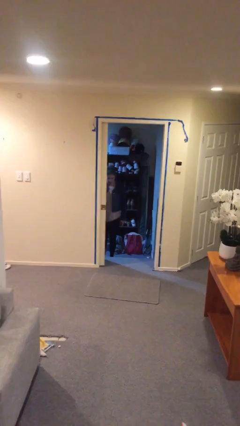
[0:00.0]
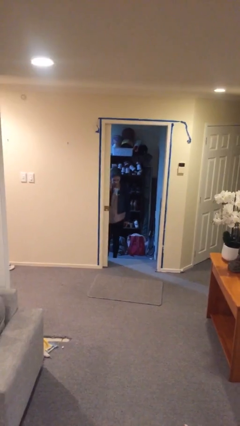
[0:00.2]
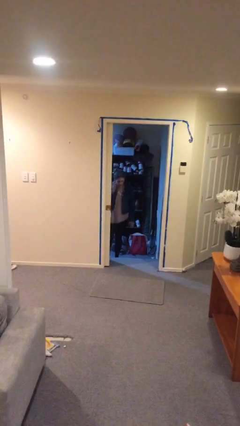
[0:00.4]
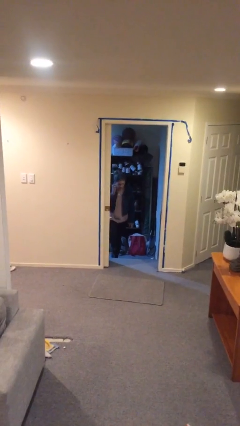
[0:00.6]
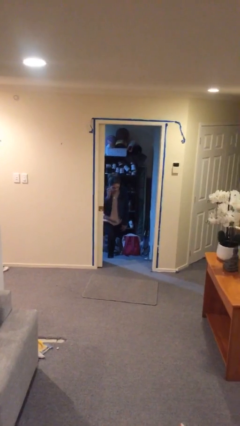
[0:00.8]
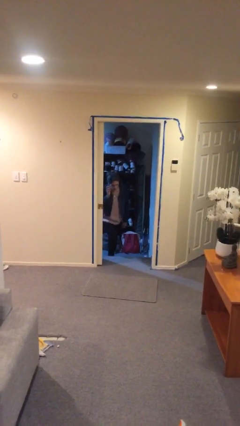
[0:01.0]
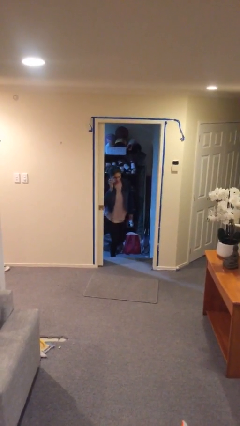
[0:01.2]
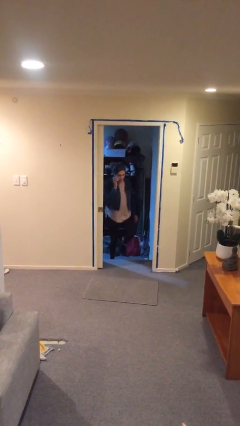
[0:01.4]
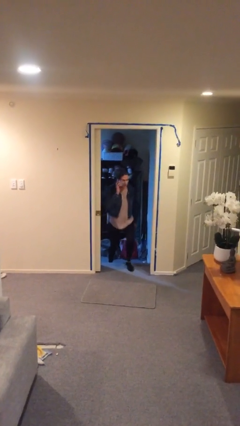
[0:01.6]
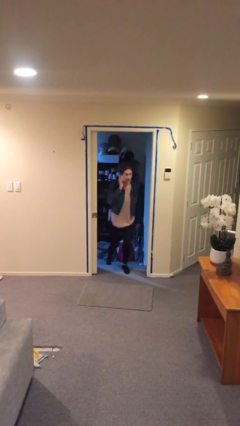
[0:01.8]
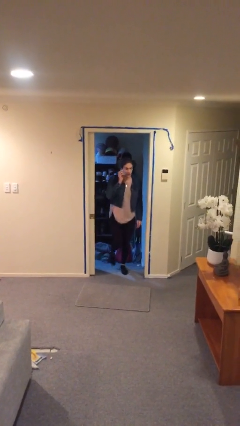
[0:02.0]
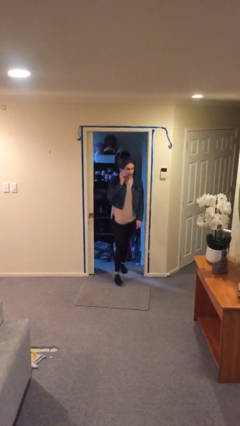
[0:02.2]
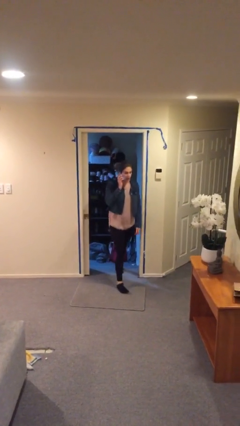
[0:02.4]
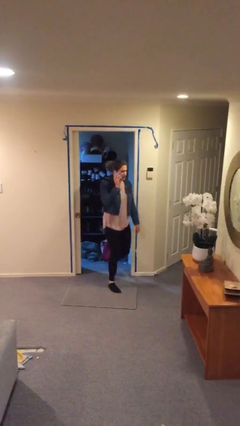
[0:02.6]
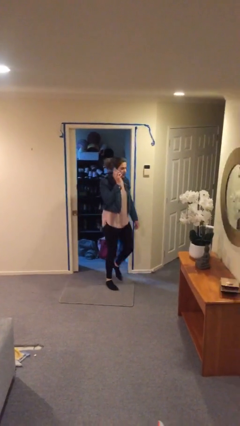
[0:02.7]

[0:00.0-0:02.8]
person enters scene through structure

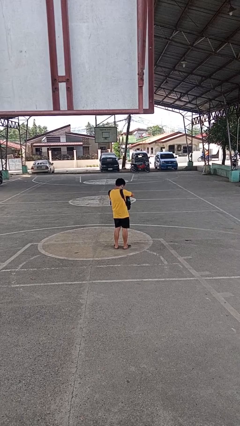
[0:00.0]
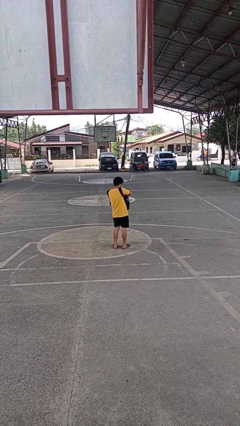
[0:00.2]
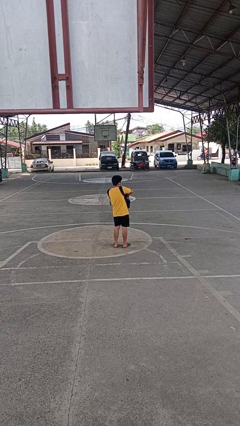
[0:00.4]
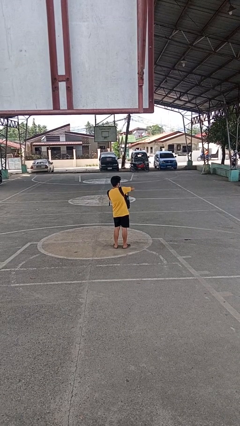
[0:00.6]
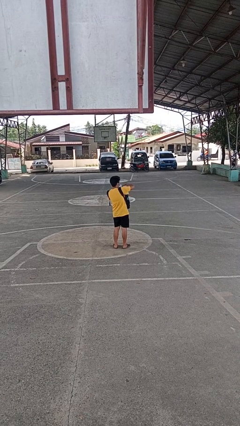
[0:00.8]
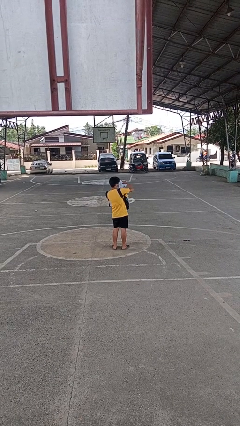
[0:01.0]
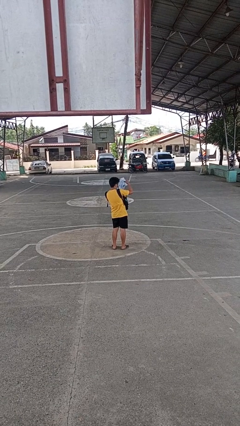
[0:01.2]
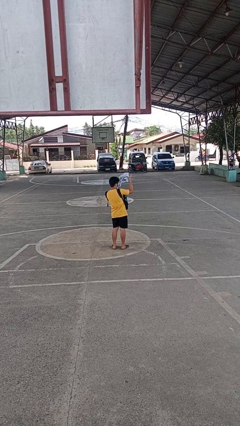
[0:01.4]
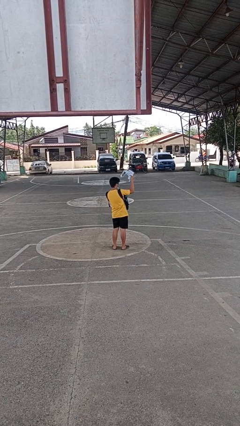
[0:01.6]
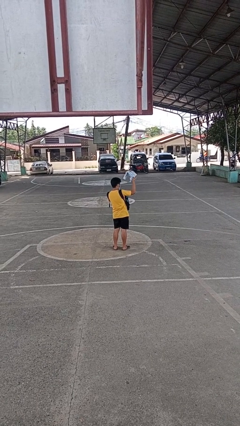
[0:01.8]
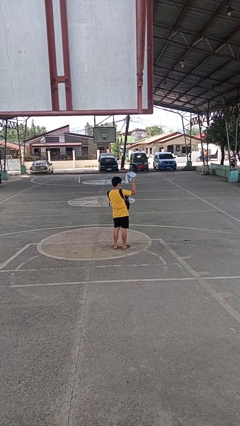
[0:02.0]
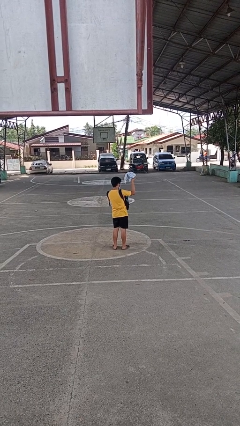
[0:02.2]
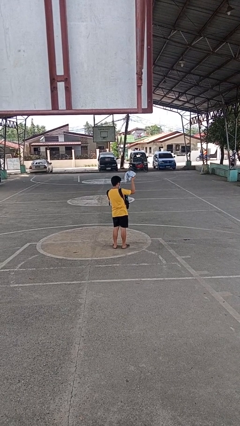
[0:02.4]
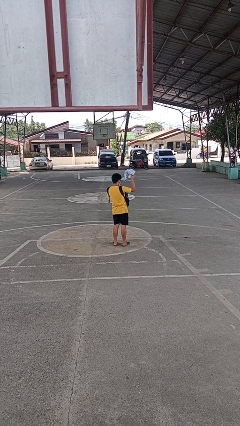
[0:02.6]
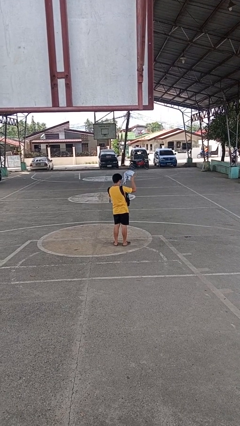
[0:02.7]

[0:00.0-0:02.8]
person takes object from backpack

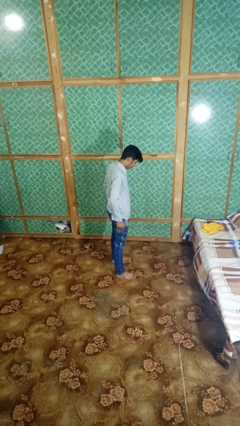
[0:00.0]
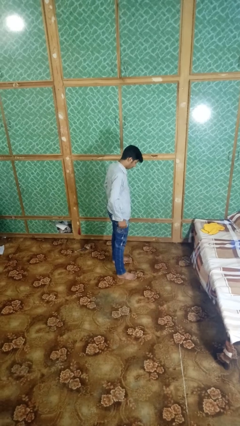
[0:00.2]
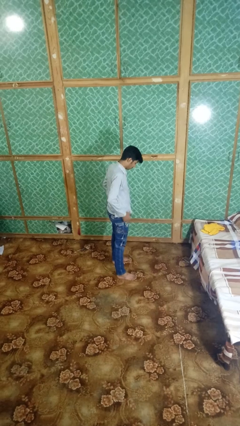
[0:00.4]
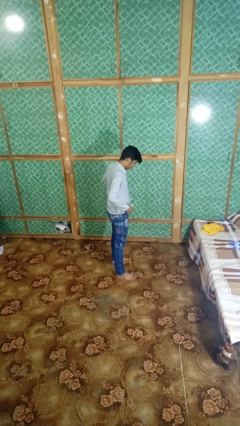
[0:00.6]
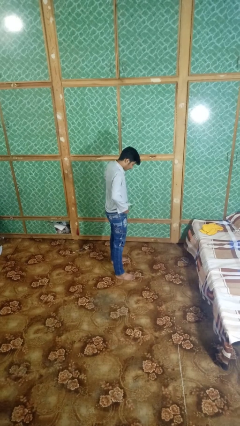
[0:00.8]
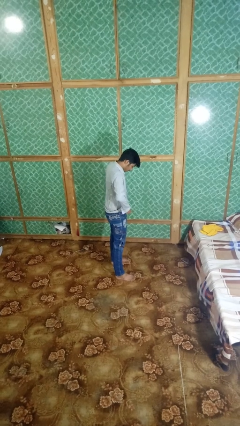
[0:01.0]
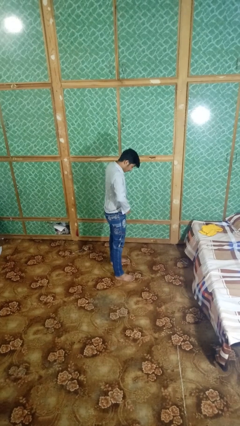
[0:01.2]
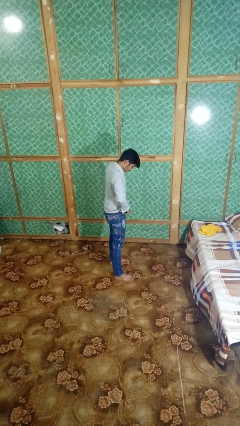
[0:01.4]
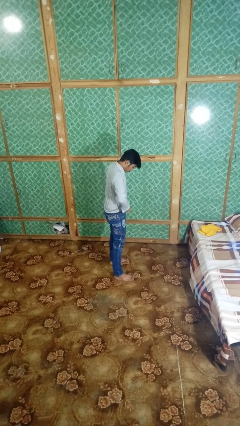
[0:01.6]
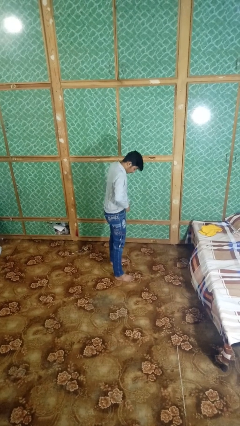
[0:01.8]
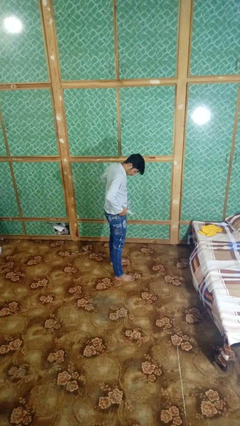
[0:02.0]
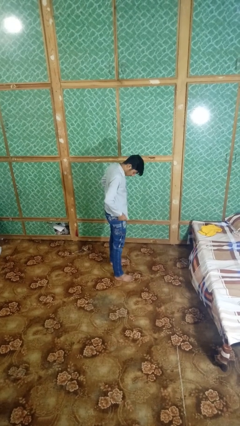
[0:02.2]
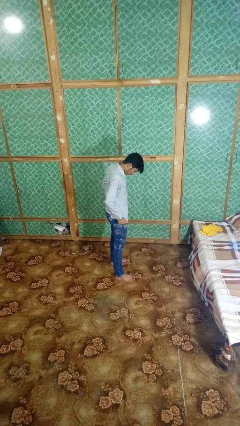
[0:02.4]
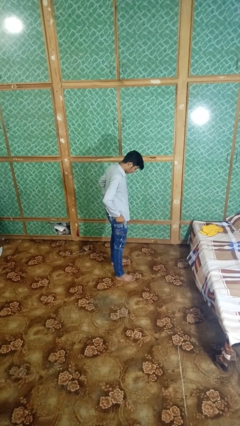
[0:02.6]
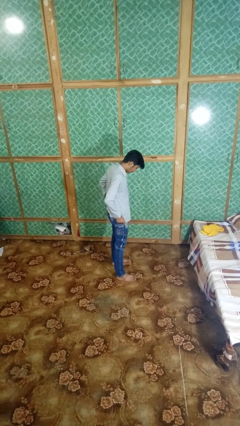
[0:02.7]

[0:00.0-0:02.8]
person hikes up pants

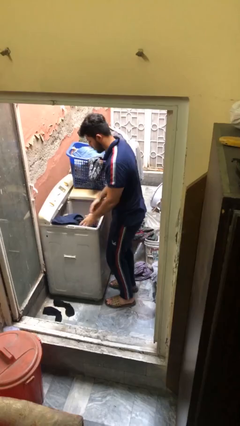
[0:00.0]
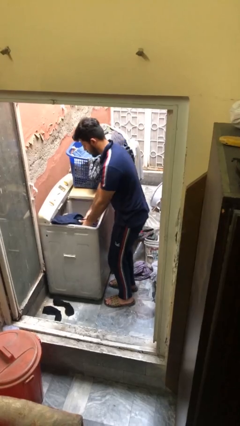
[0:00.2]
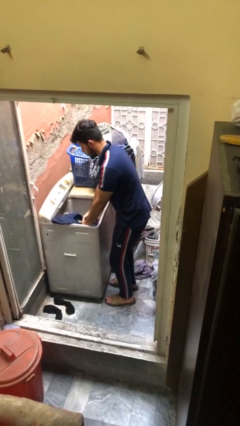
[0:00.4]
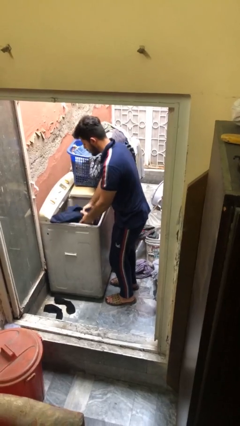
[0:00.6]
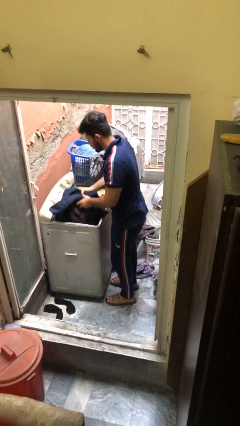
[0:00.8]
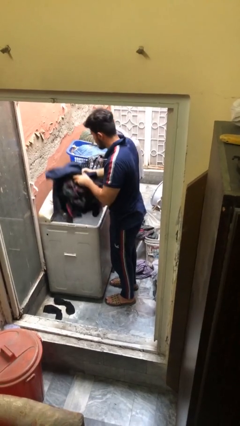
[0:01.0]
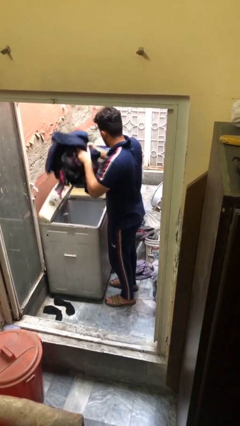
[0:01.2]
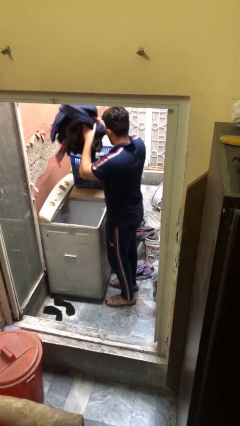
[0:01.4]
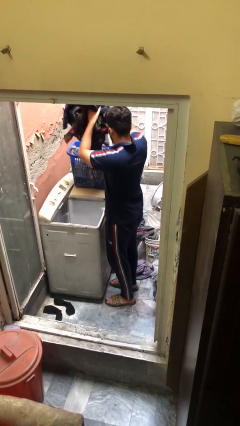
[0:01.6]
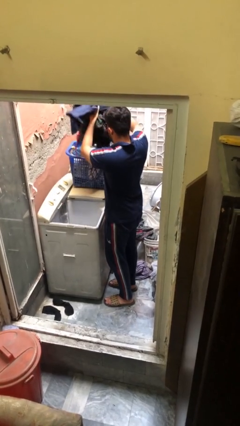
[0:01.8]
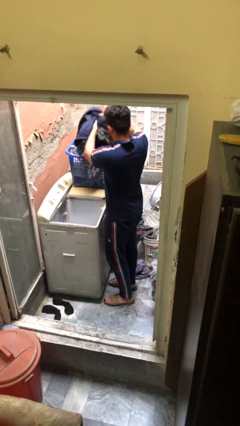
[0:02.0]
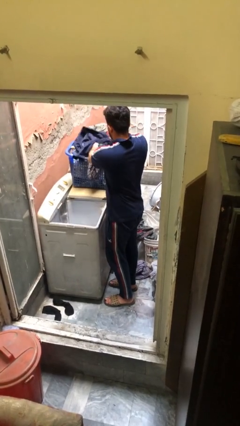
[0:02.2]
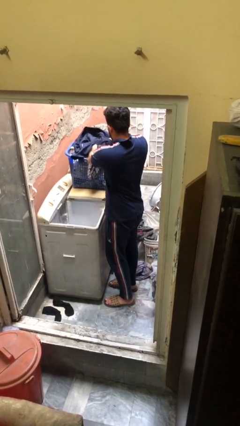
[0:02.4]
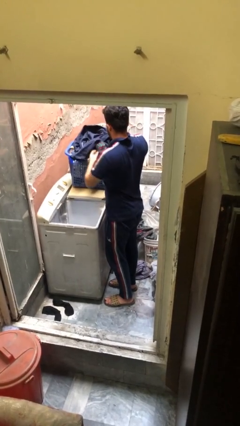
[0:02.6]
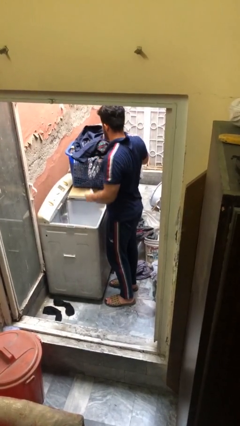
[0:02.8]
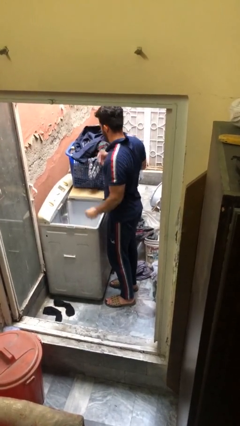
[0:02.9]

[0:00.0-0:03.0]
person loads clotheswasher

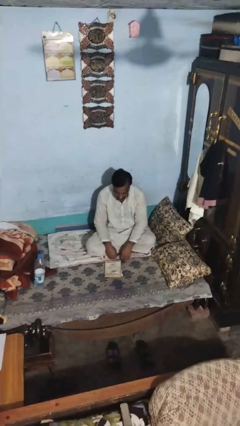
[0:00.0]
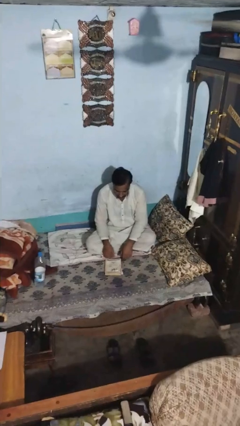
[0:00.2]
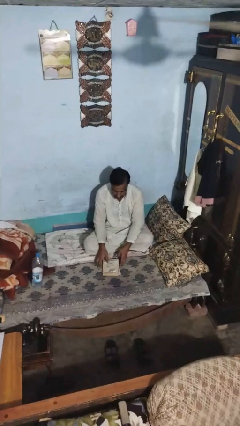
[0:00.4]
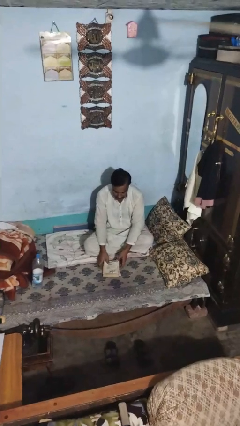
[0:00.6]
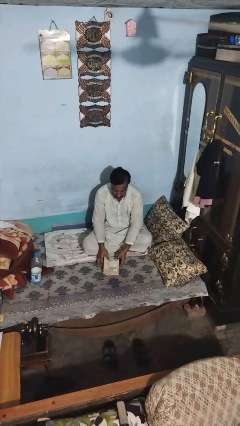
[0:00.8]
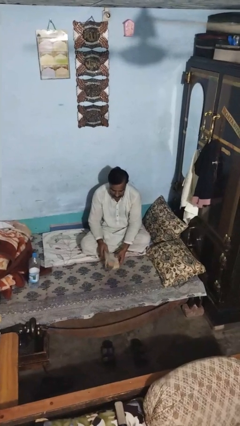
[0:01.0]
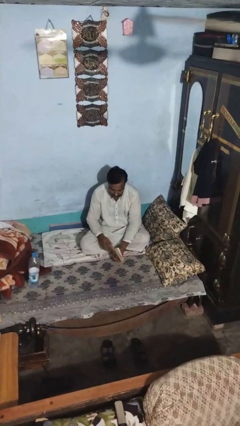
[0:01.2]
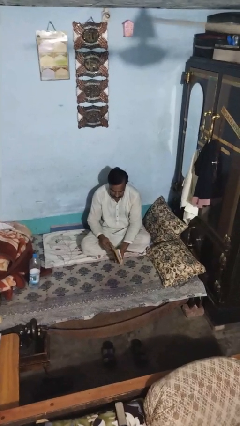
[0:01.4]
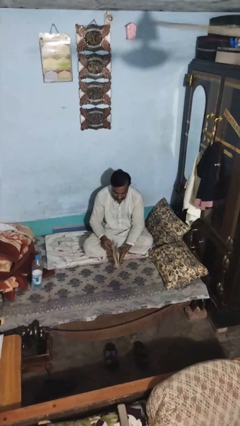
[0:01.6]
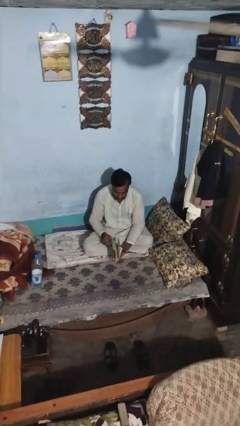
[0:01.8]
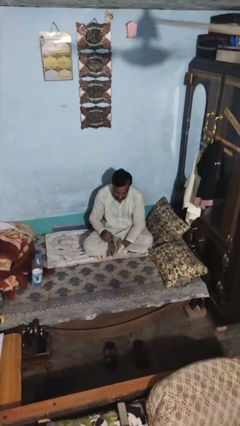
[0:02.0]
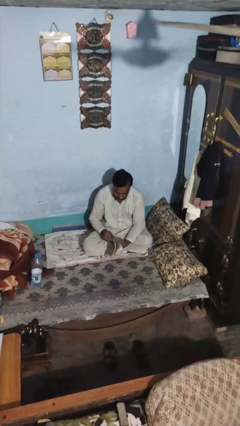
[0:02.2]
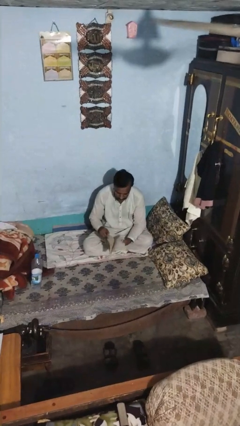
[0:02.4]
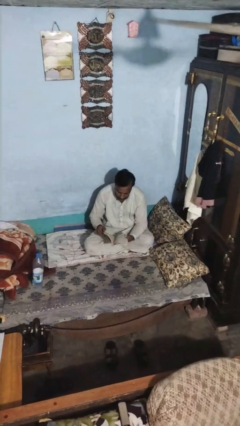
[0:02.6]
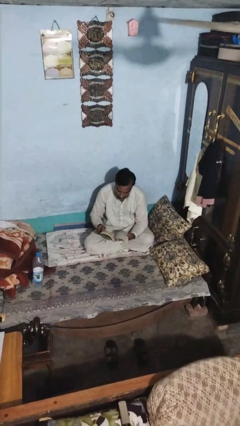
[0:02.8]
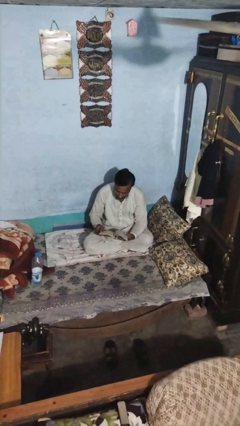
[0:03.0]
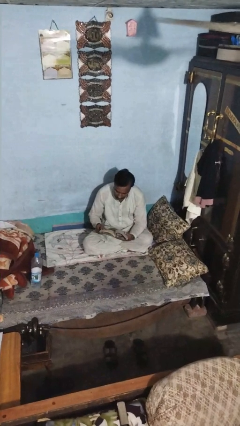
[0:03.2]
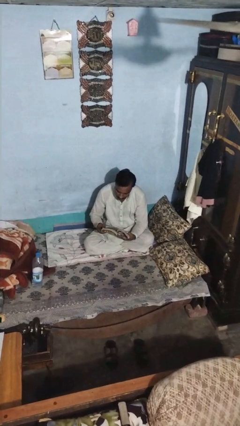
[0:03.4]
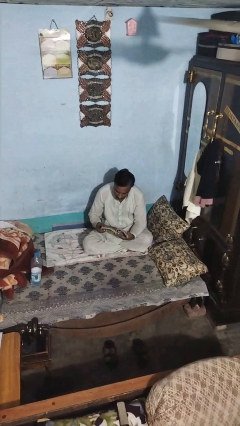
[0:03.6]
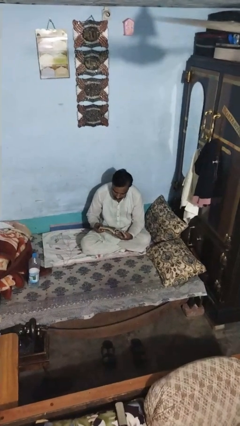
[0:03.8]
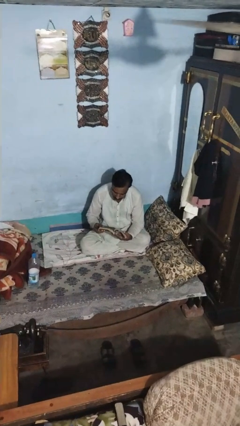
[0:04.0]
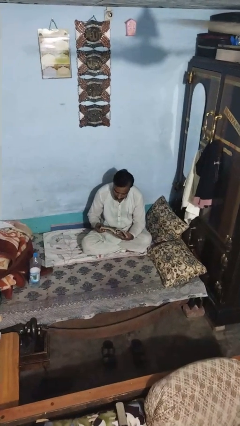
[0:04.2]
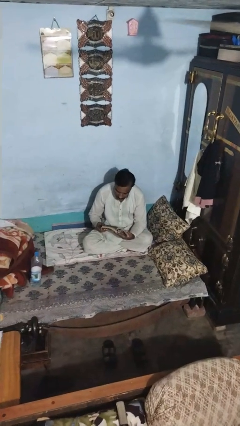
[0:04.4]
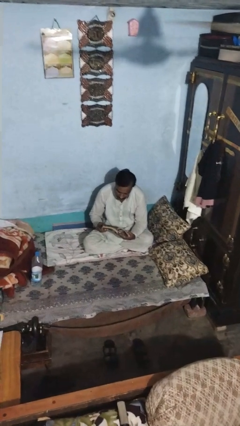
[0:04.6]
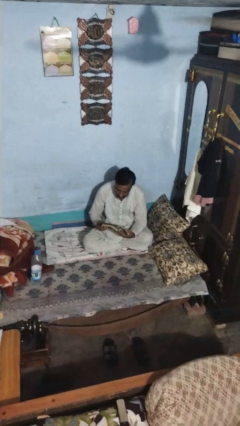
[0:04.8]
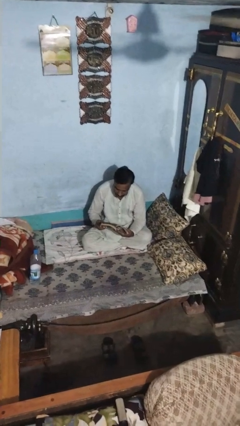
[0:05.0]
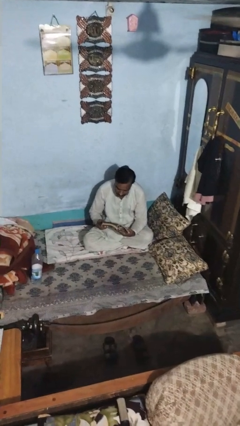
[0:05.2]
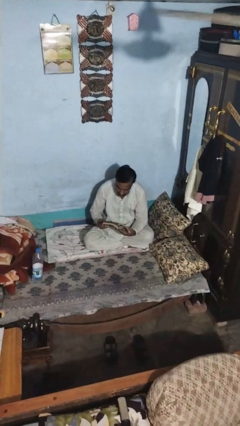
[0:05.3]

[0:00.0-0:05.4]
person reads magazine

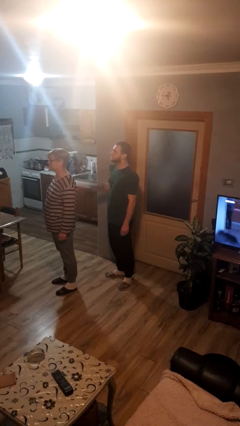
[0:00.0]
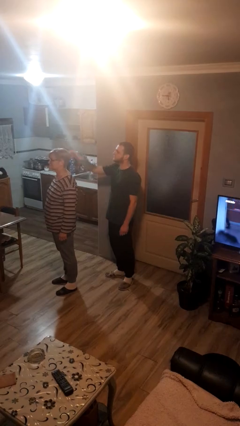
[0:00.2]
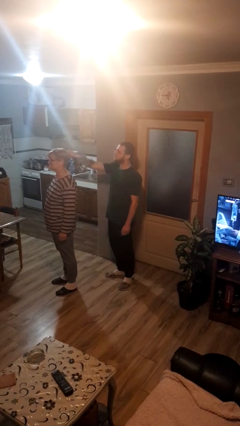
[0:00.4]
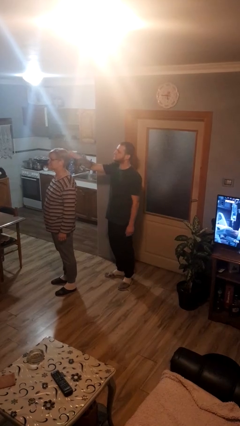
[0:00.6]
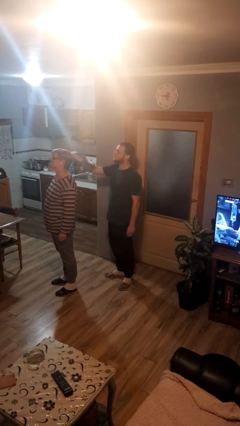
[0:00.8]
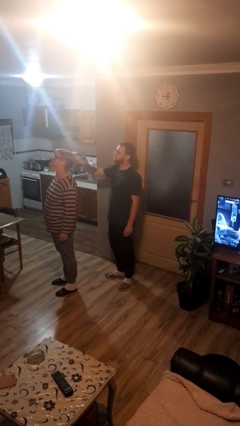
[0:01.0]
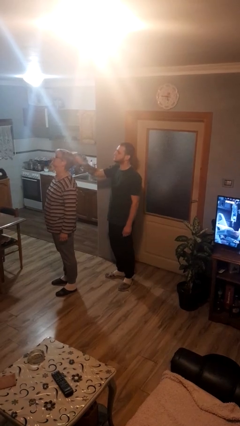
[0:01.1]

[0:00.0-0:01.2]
person grabs person by hair
